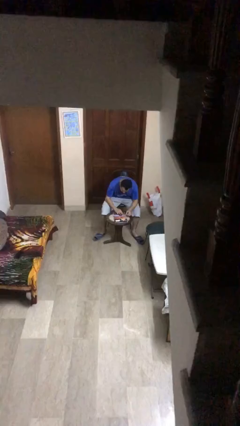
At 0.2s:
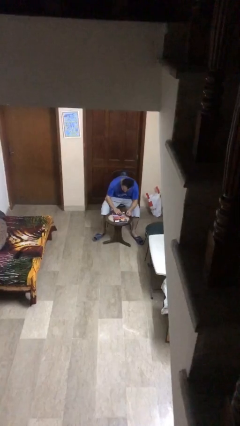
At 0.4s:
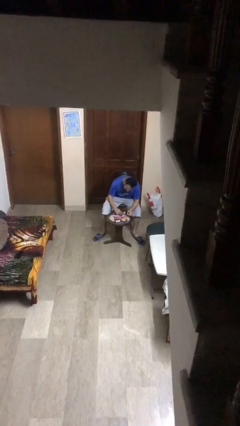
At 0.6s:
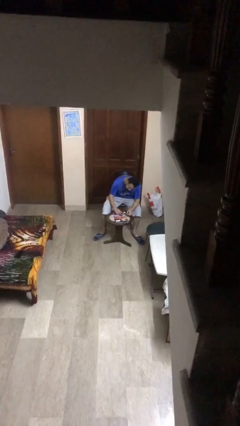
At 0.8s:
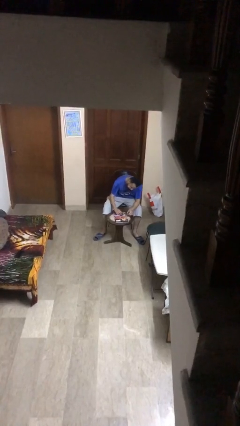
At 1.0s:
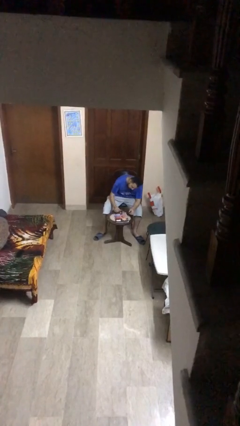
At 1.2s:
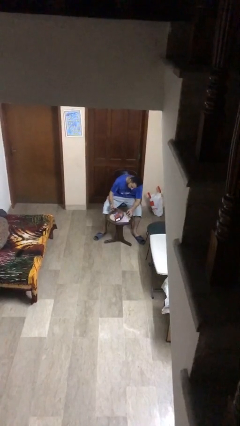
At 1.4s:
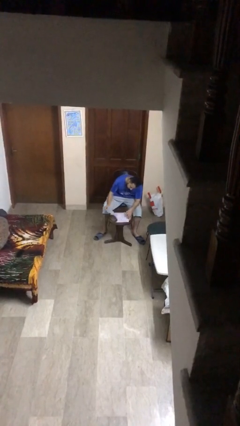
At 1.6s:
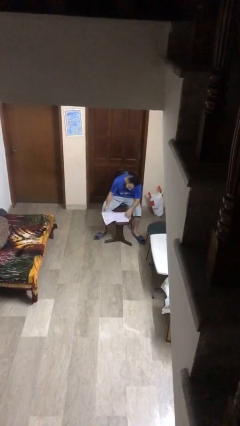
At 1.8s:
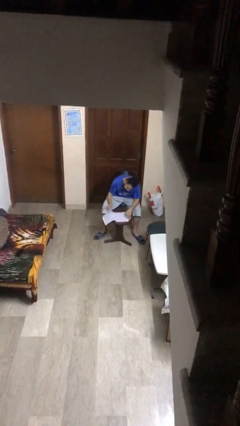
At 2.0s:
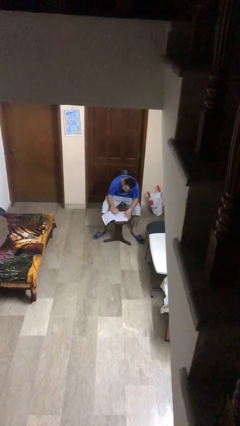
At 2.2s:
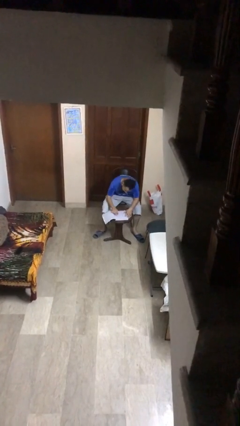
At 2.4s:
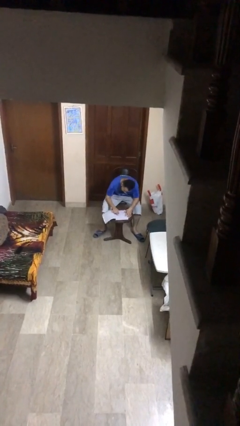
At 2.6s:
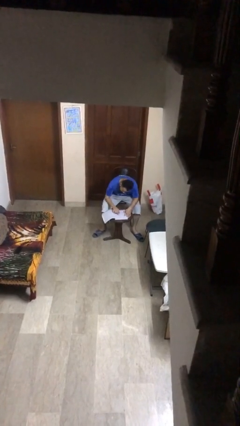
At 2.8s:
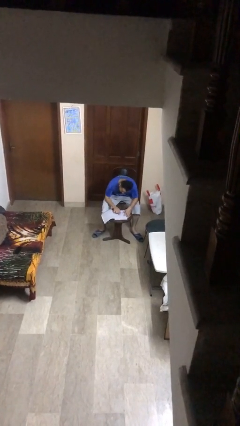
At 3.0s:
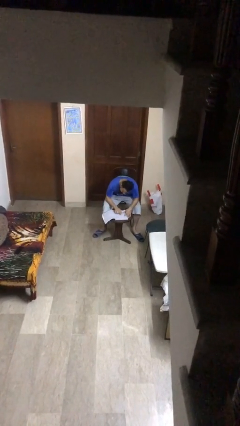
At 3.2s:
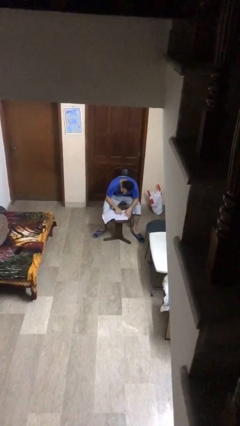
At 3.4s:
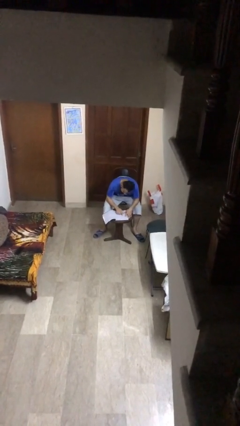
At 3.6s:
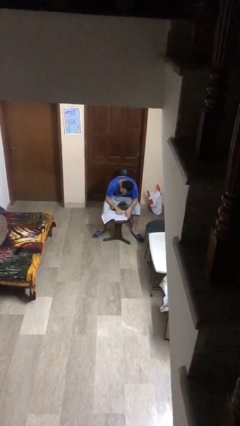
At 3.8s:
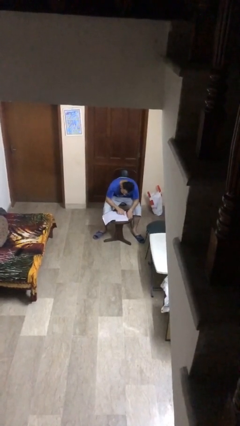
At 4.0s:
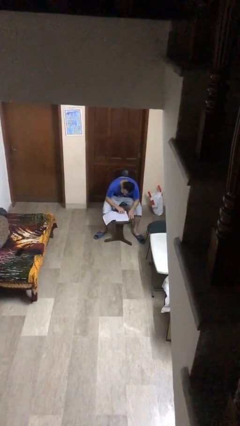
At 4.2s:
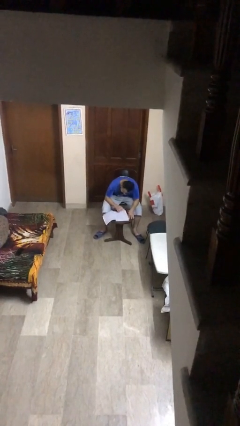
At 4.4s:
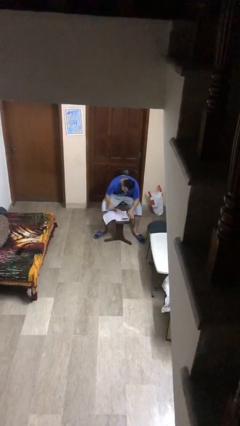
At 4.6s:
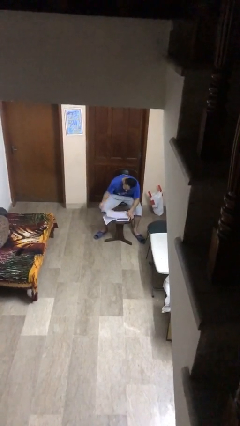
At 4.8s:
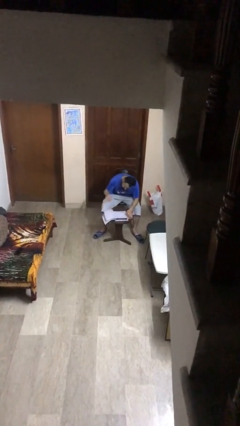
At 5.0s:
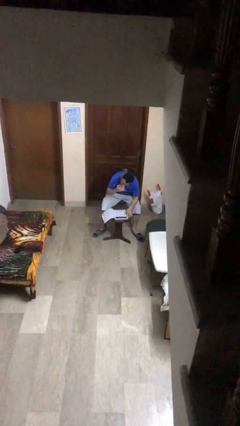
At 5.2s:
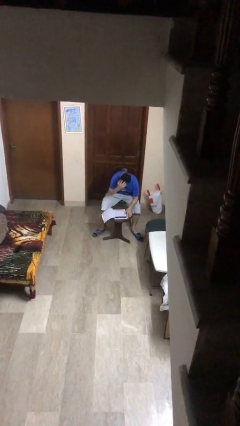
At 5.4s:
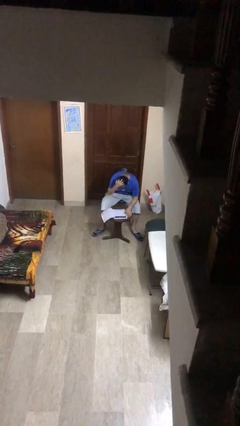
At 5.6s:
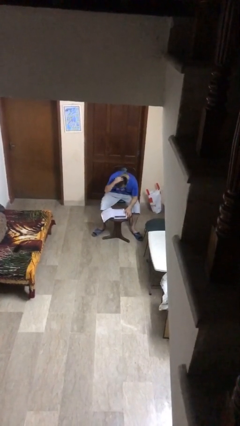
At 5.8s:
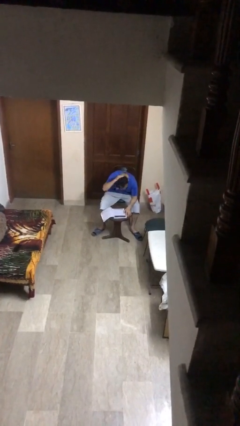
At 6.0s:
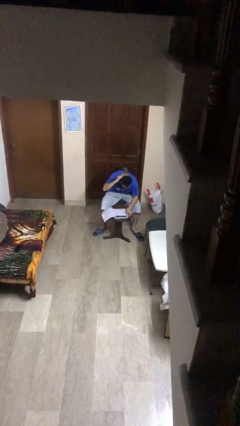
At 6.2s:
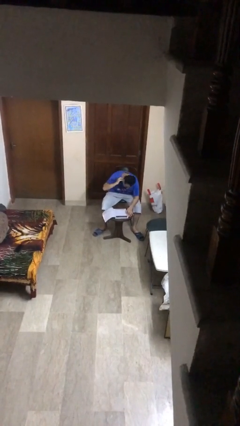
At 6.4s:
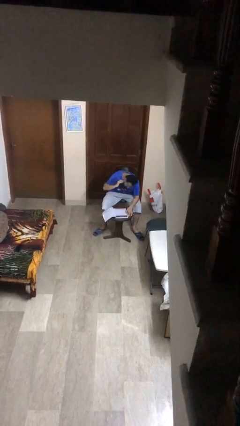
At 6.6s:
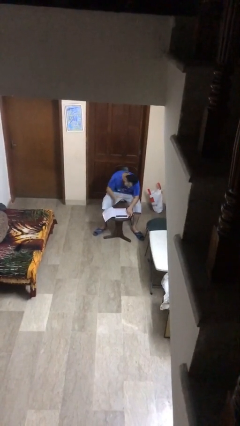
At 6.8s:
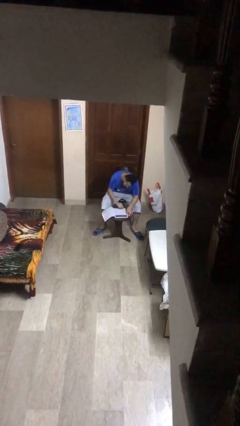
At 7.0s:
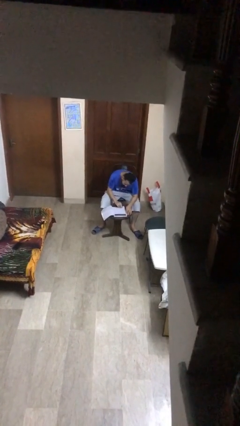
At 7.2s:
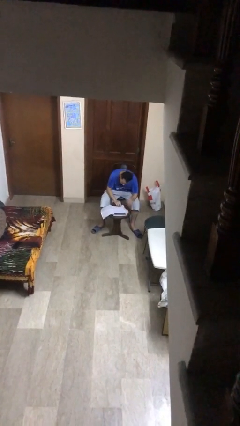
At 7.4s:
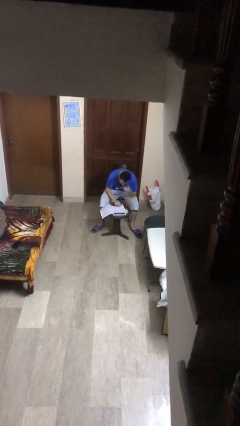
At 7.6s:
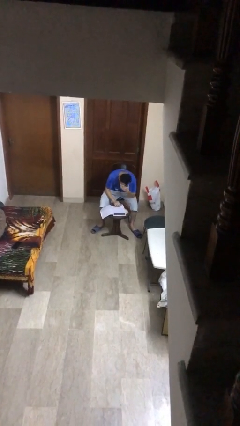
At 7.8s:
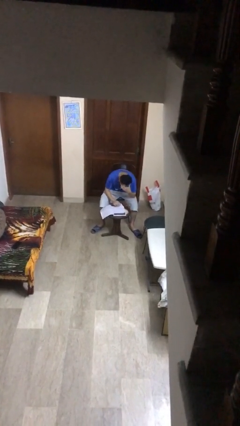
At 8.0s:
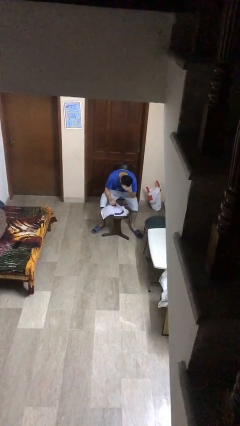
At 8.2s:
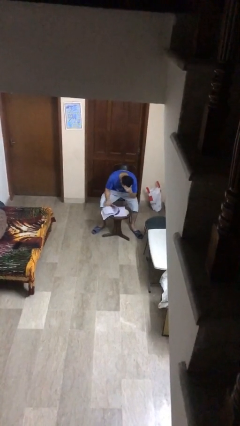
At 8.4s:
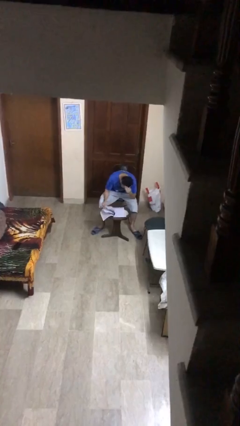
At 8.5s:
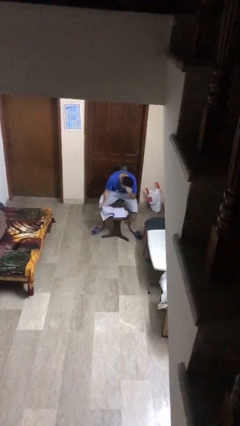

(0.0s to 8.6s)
person reads document

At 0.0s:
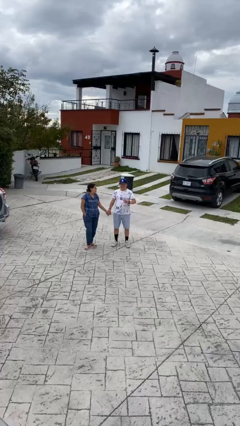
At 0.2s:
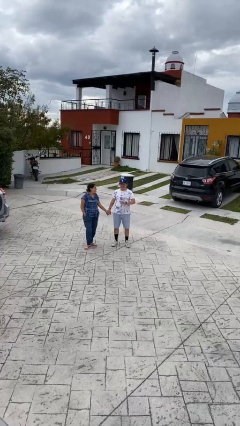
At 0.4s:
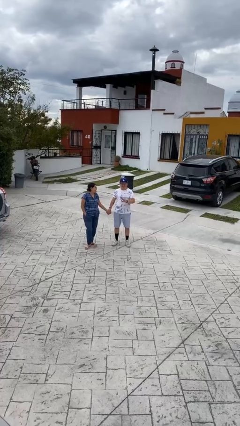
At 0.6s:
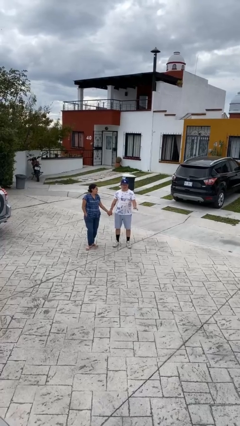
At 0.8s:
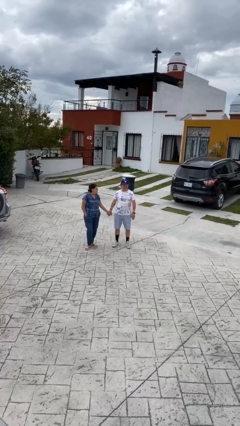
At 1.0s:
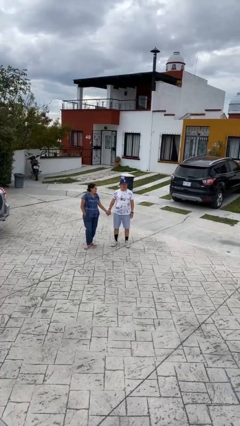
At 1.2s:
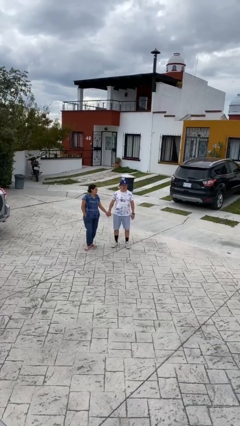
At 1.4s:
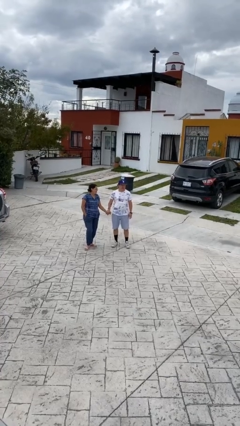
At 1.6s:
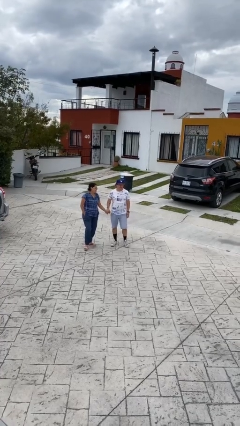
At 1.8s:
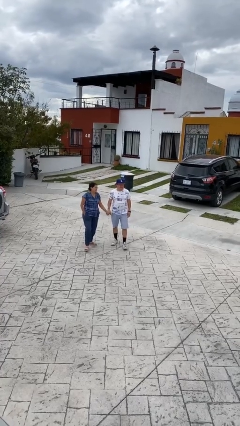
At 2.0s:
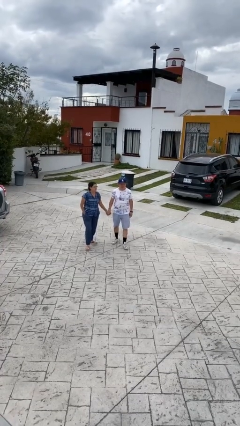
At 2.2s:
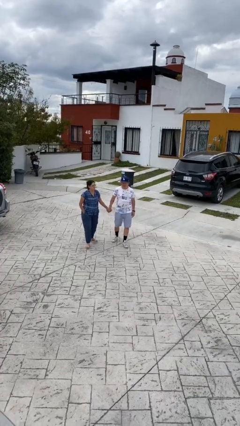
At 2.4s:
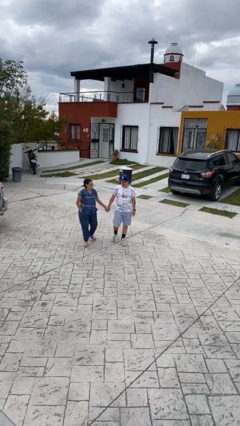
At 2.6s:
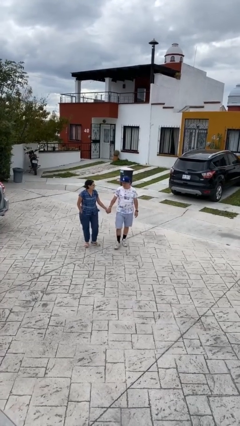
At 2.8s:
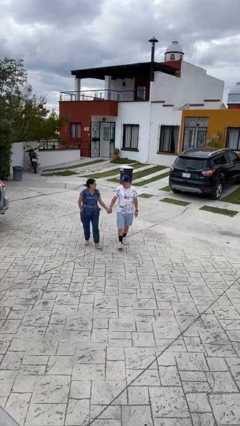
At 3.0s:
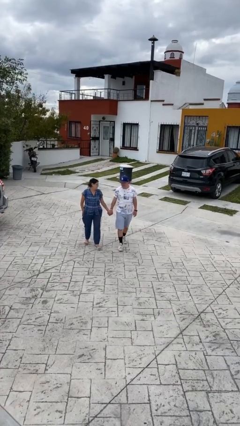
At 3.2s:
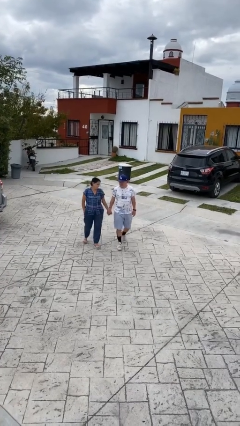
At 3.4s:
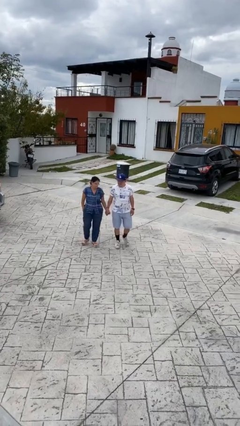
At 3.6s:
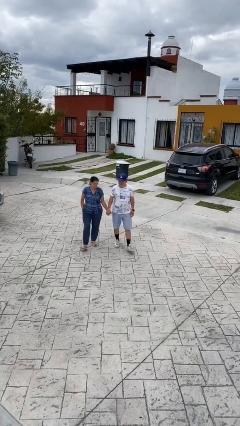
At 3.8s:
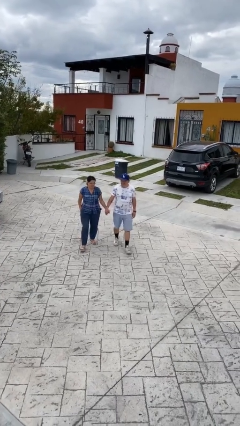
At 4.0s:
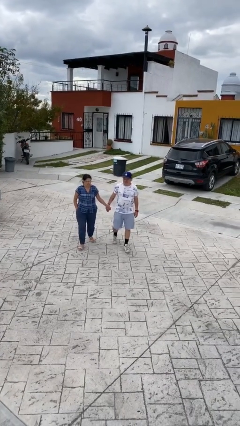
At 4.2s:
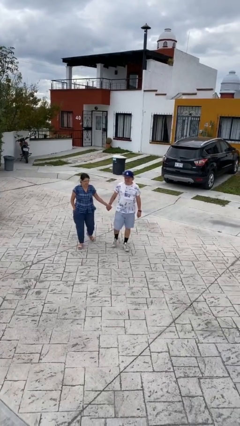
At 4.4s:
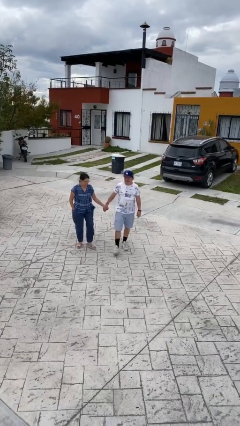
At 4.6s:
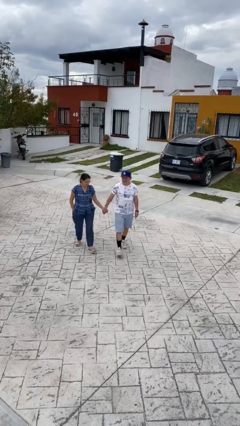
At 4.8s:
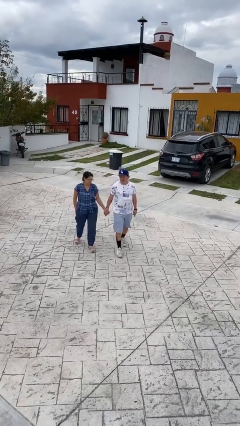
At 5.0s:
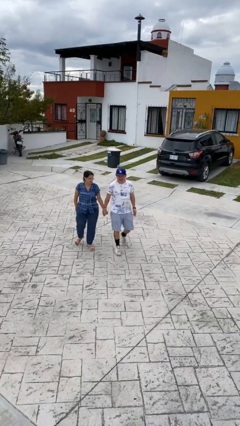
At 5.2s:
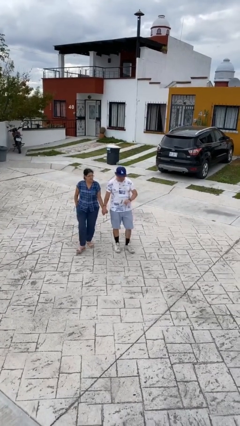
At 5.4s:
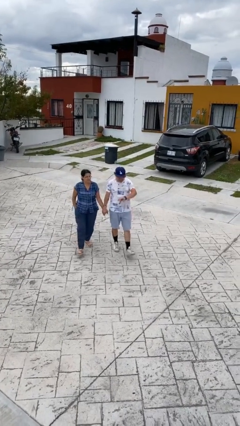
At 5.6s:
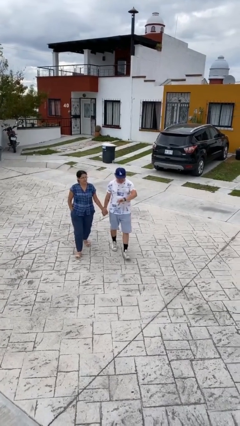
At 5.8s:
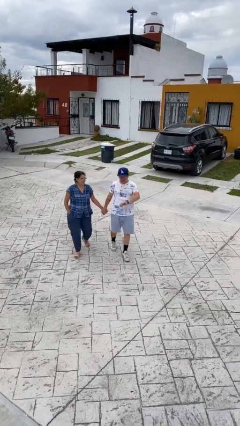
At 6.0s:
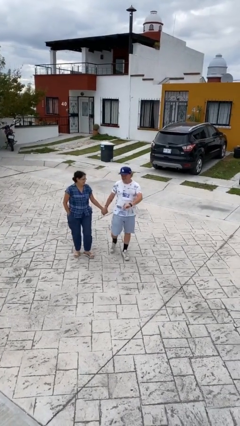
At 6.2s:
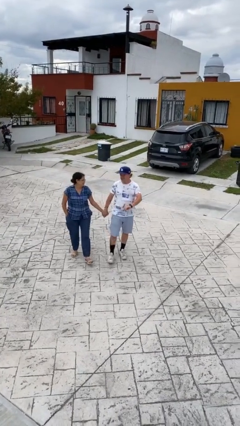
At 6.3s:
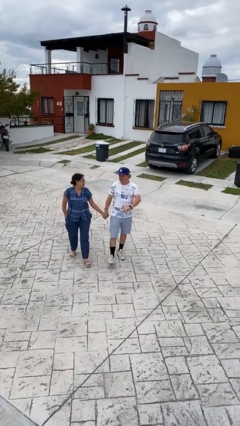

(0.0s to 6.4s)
person holds hand

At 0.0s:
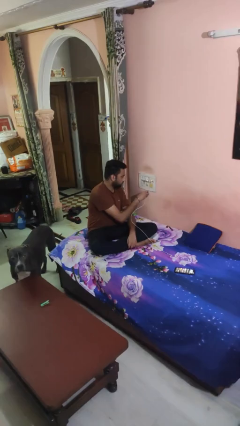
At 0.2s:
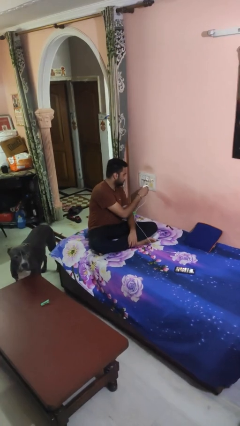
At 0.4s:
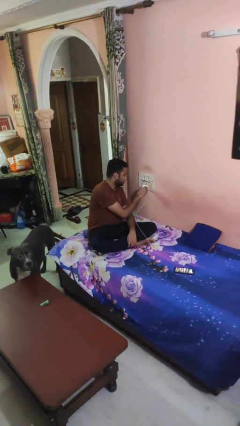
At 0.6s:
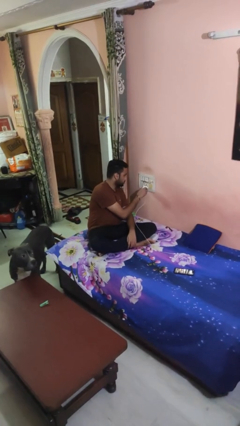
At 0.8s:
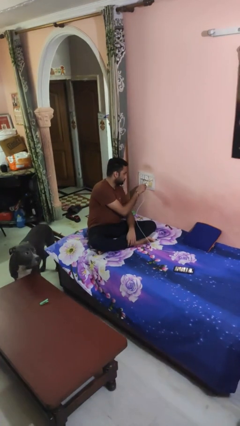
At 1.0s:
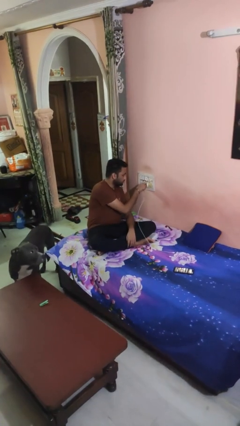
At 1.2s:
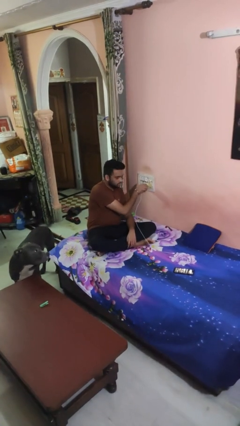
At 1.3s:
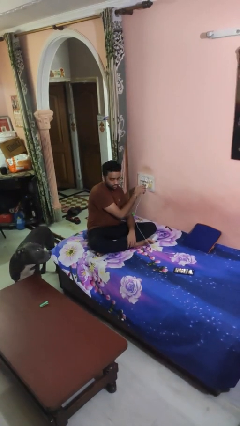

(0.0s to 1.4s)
person plugs into electrical socket

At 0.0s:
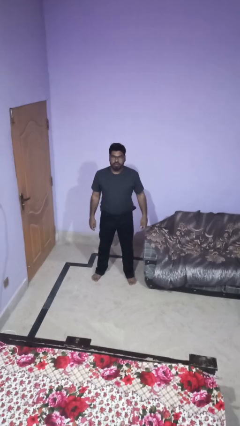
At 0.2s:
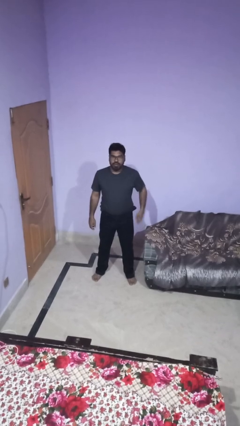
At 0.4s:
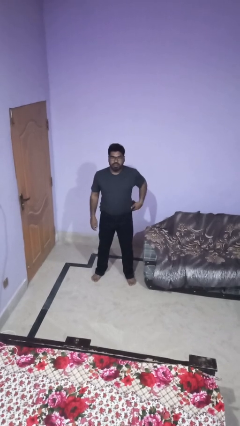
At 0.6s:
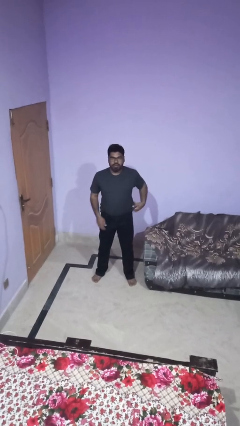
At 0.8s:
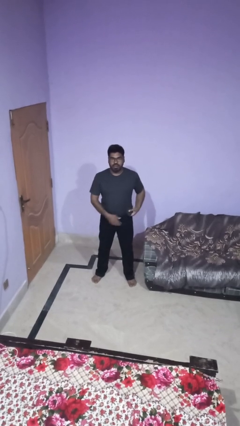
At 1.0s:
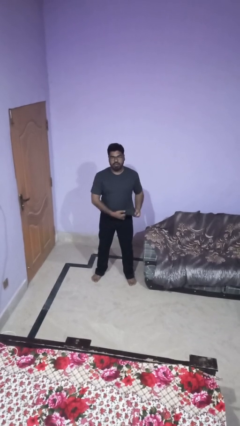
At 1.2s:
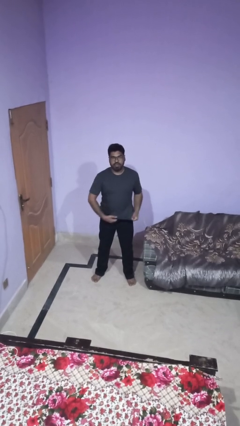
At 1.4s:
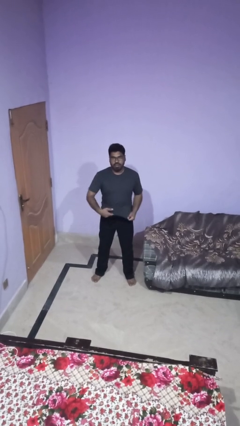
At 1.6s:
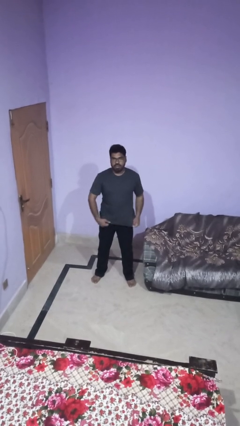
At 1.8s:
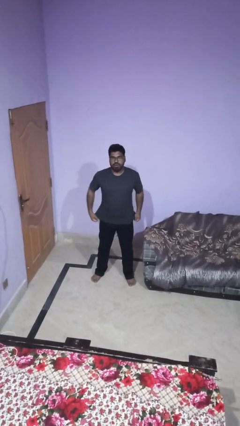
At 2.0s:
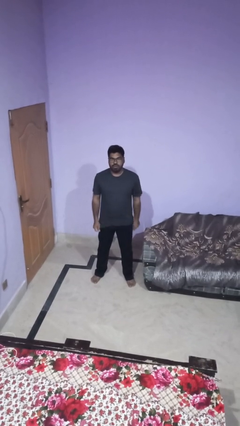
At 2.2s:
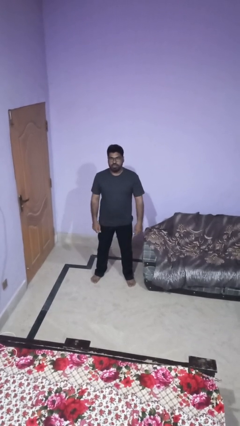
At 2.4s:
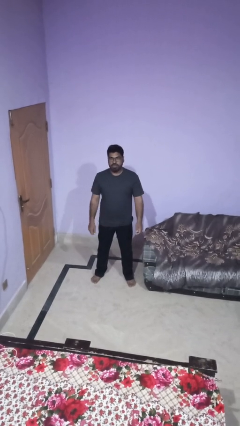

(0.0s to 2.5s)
person untucks shirt
